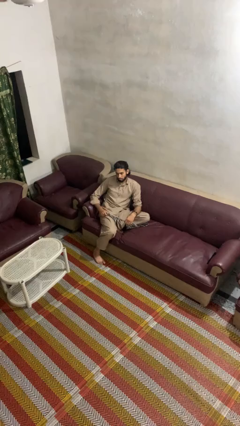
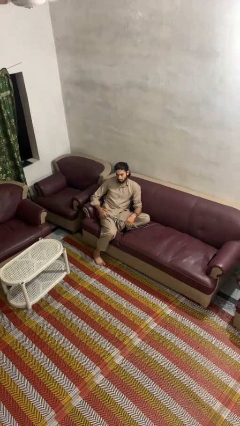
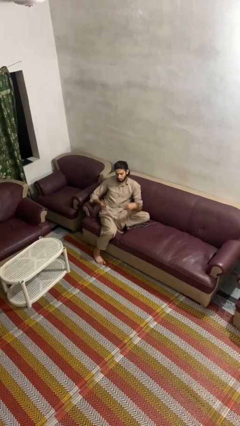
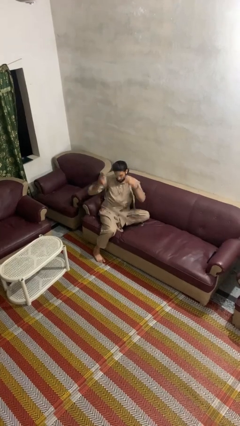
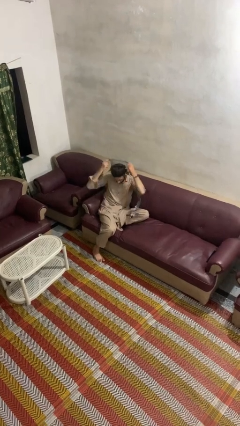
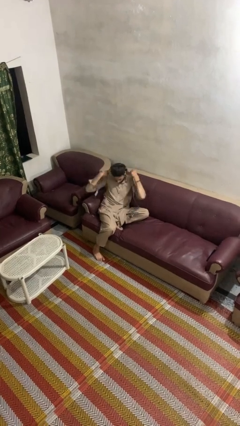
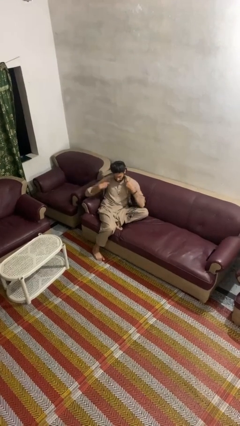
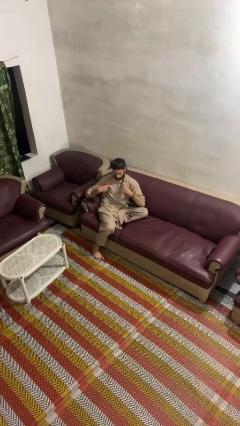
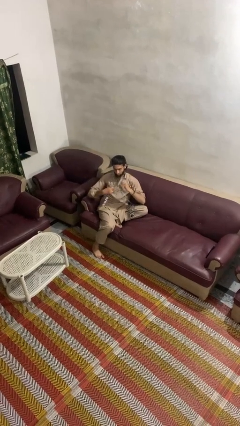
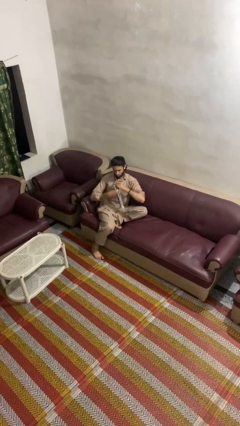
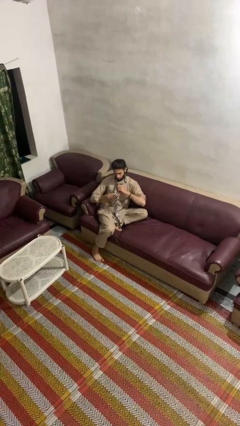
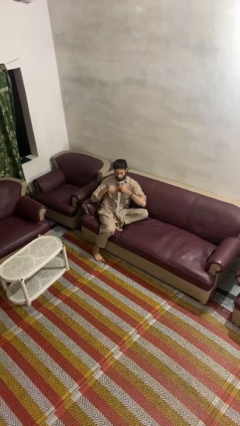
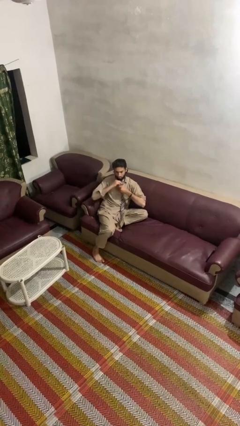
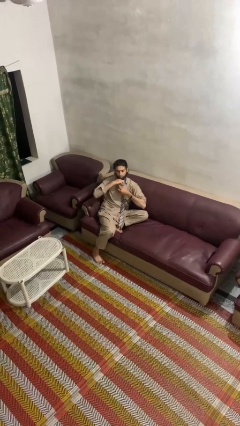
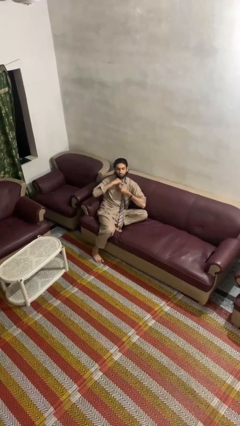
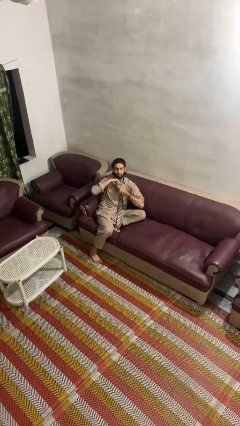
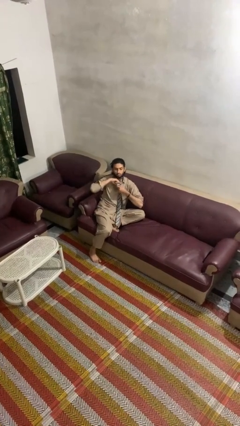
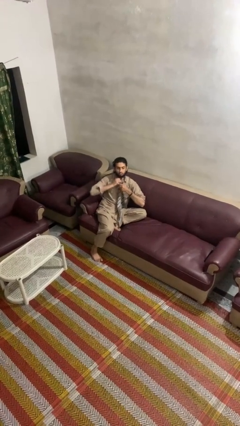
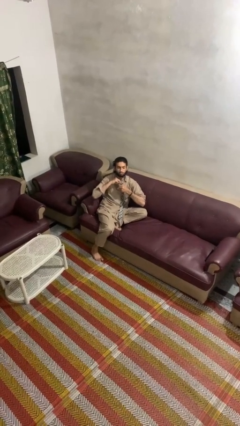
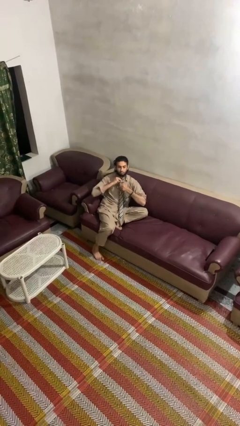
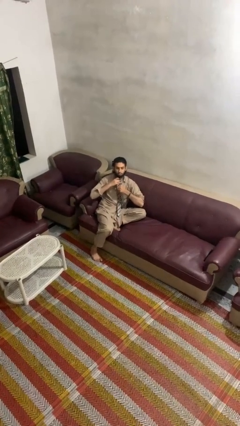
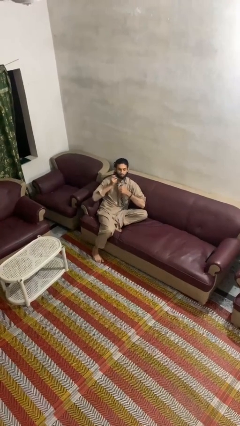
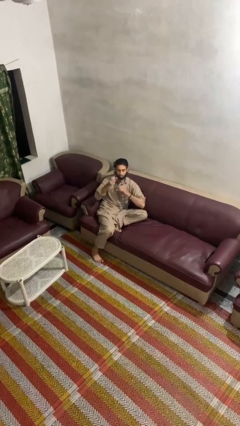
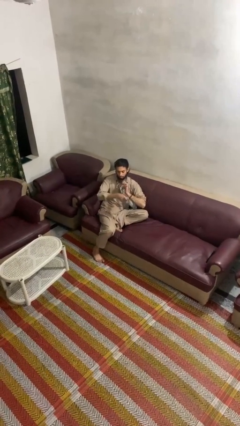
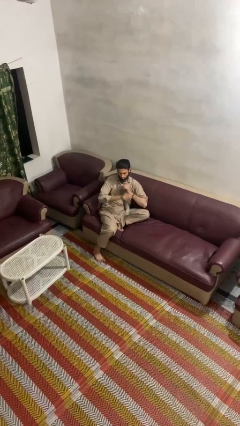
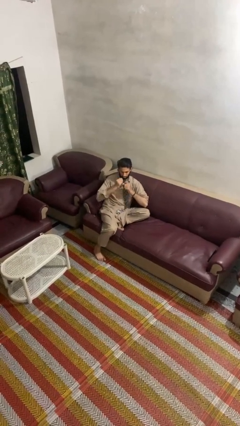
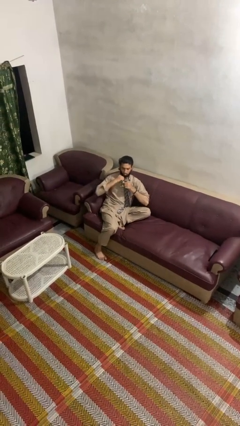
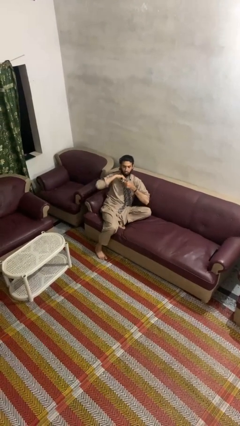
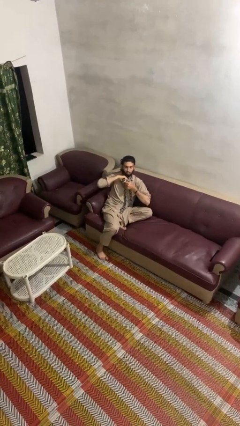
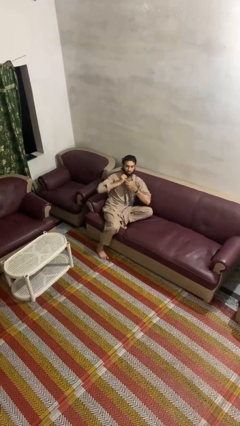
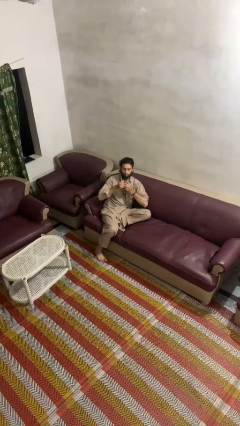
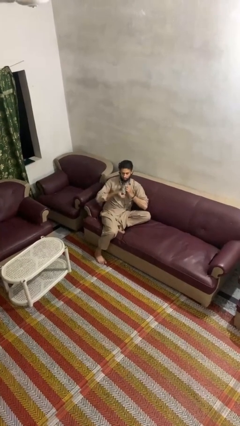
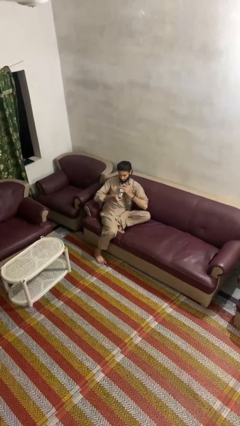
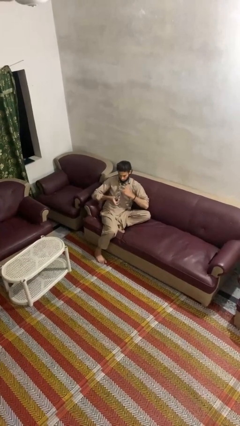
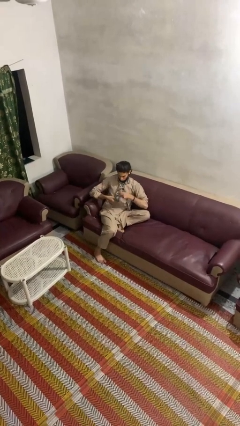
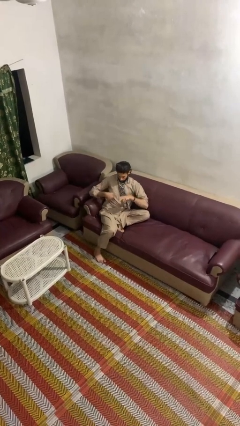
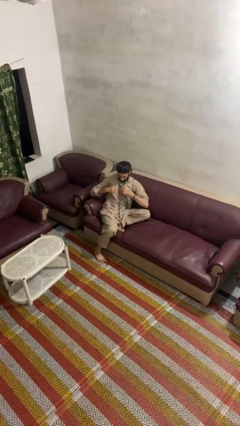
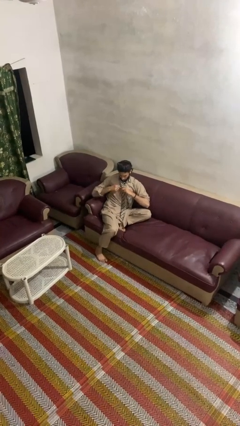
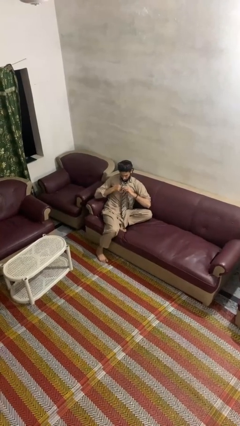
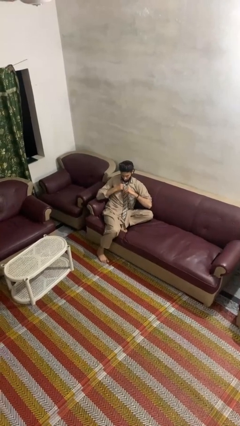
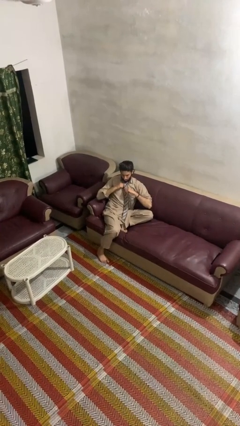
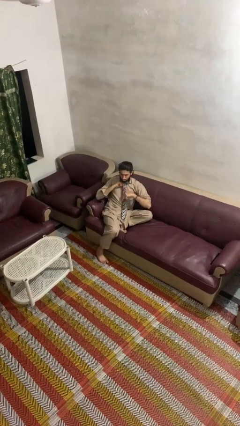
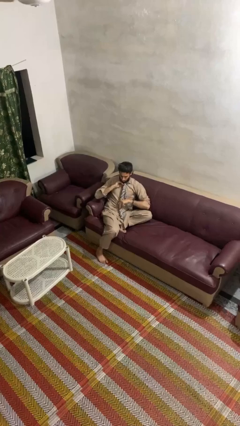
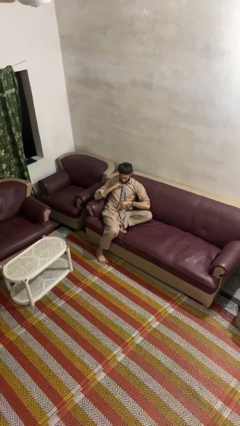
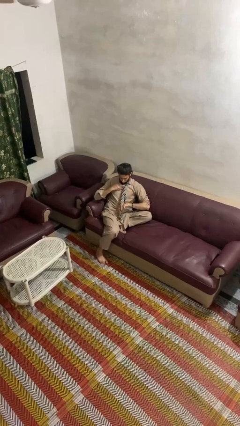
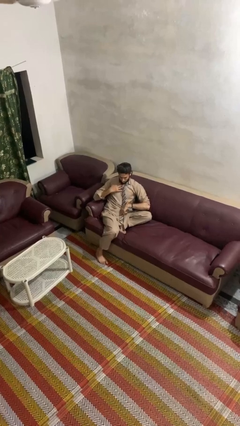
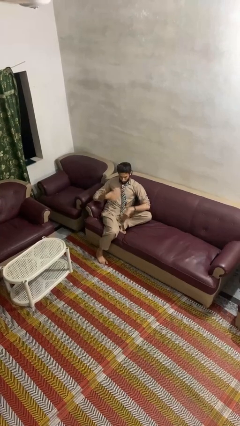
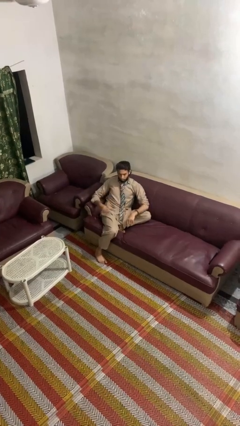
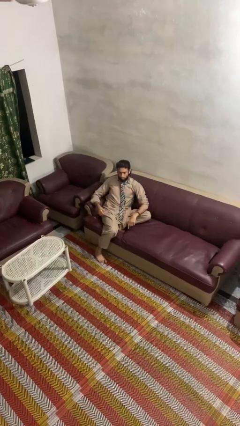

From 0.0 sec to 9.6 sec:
person puts on necktie

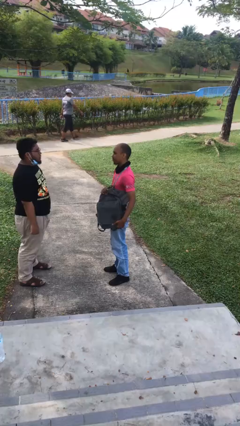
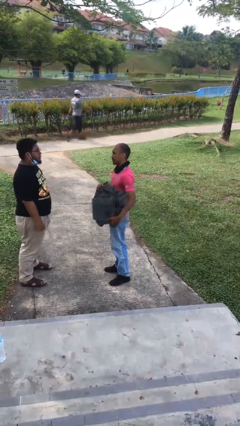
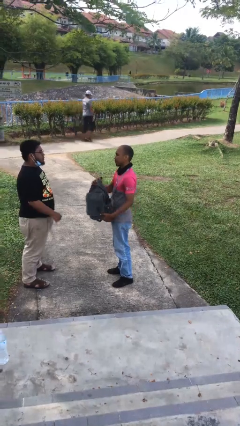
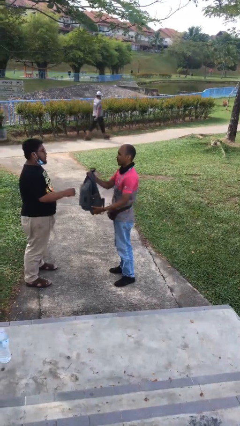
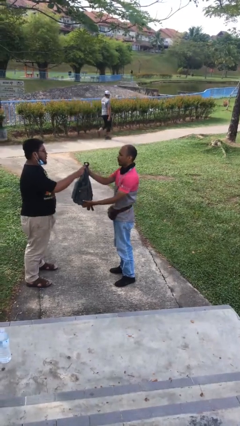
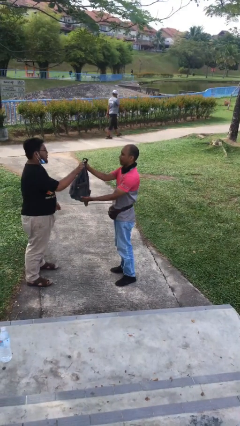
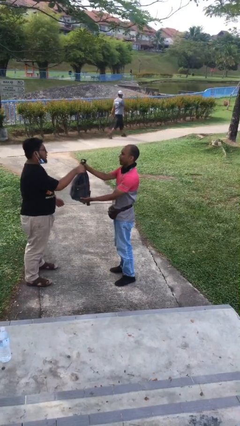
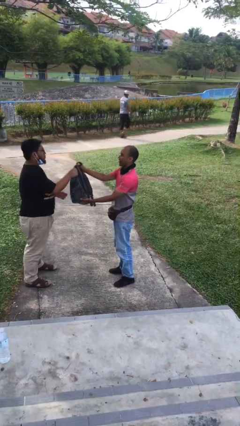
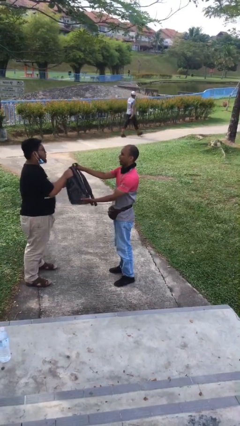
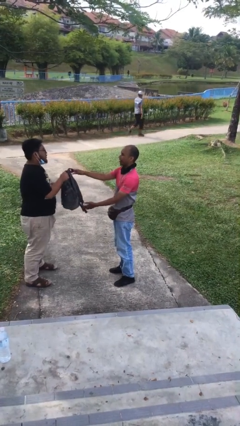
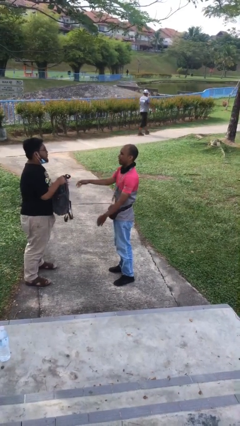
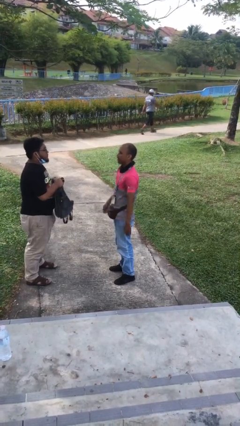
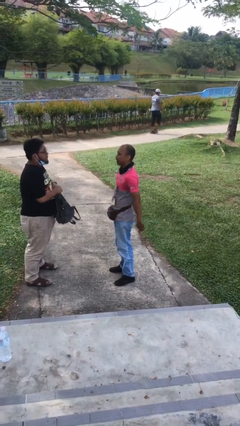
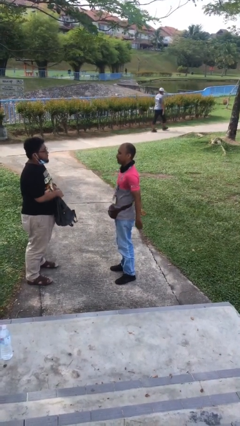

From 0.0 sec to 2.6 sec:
person transfers object to person

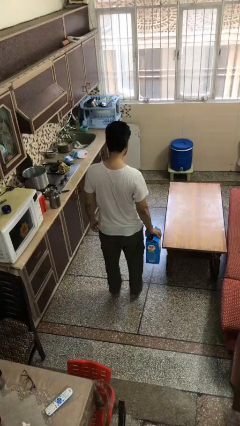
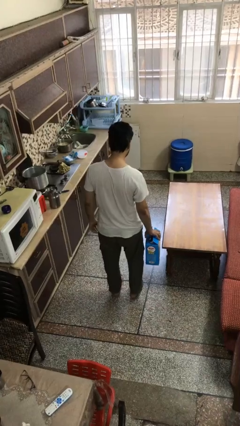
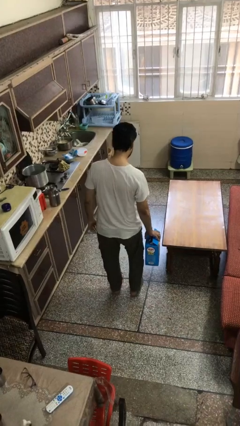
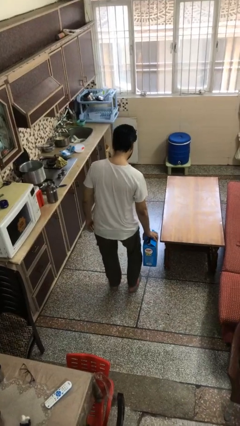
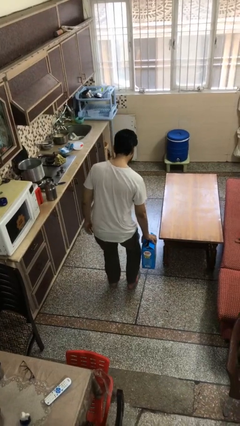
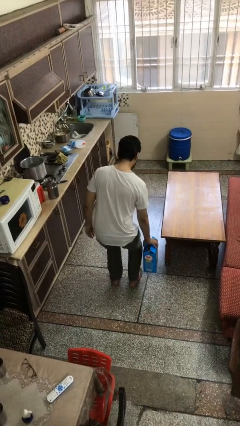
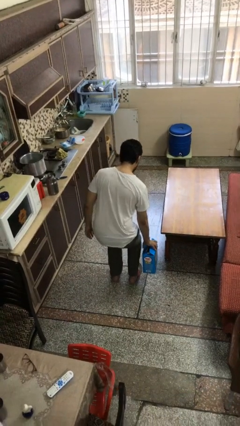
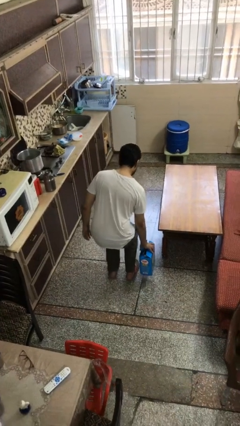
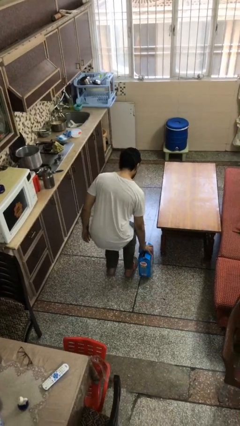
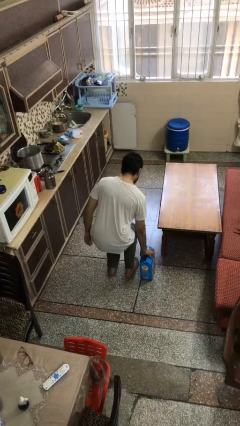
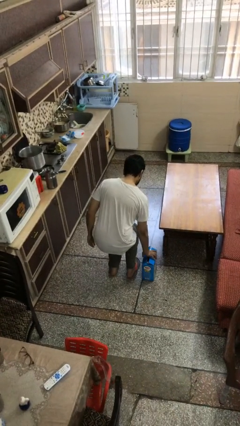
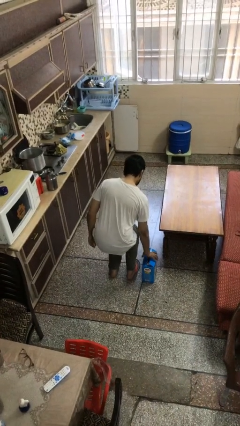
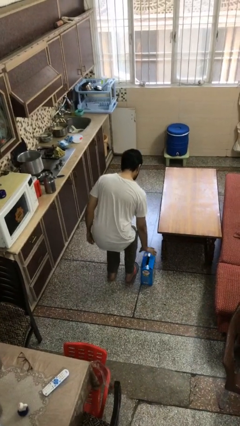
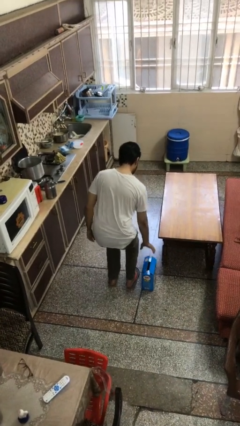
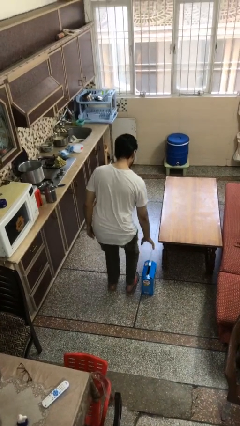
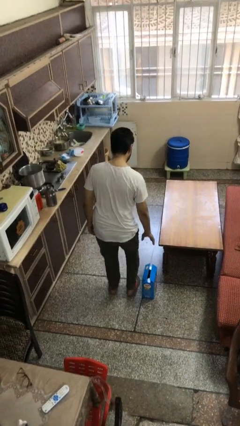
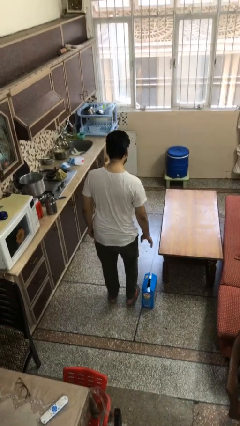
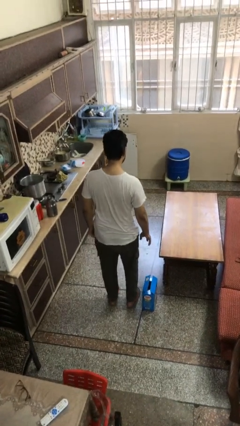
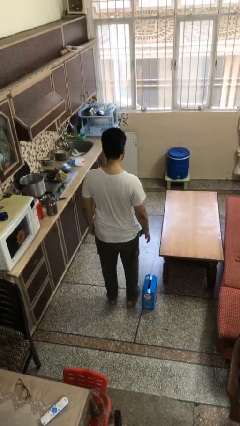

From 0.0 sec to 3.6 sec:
person puts down object on floor

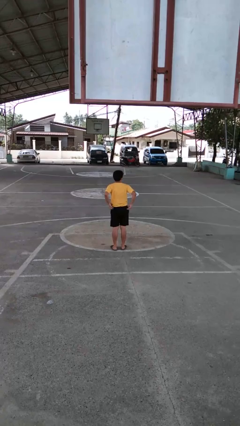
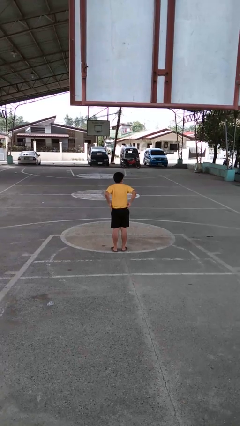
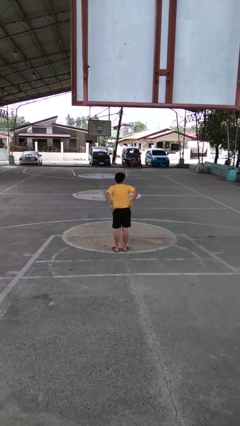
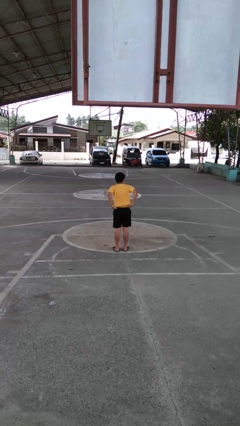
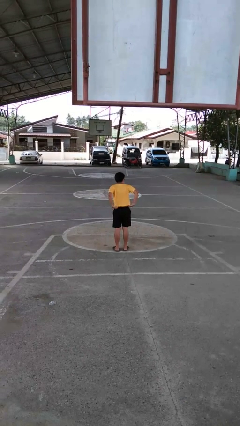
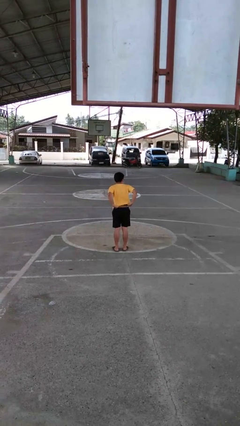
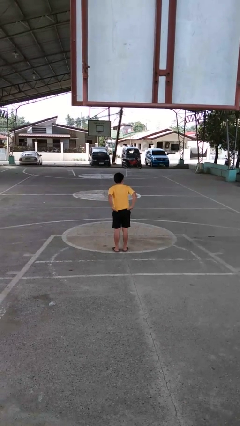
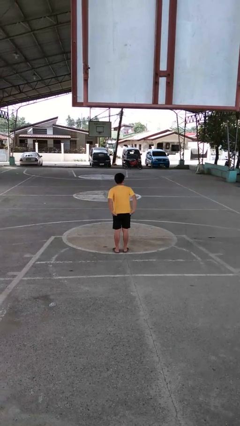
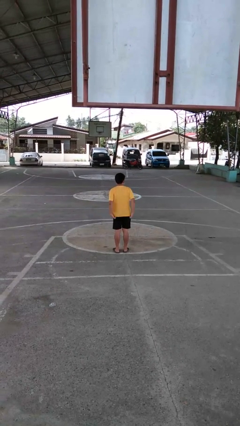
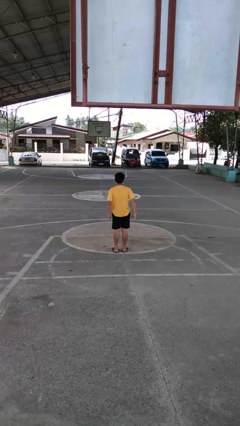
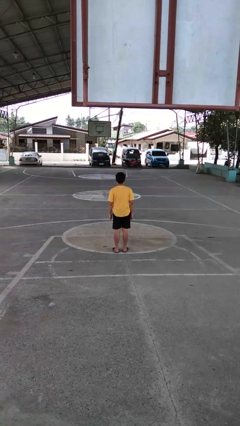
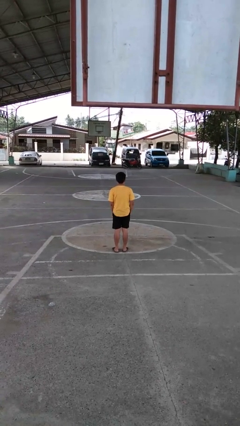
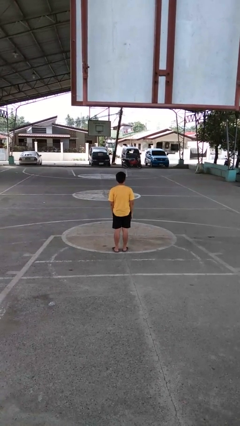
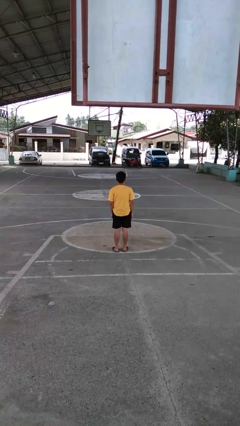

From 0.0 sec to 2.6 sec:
person untucks shirt
